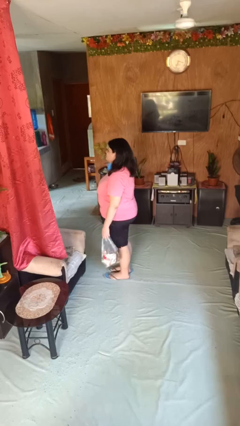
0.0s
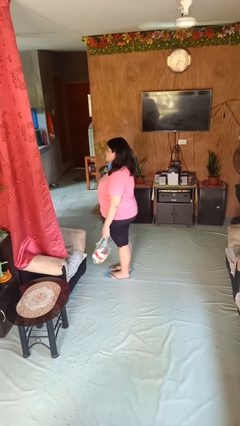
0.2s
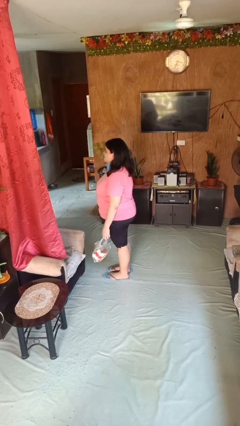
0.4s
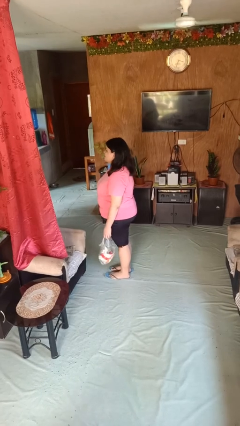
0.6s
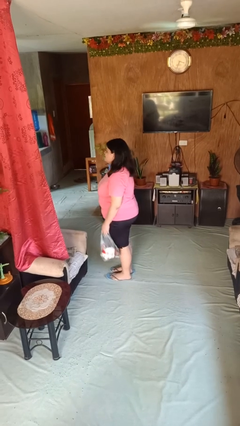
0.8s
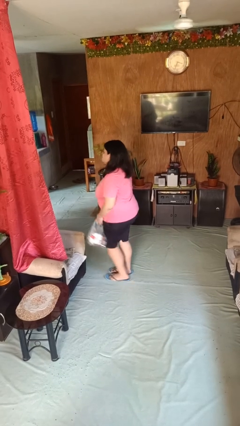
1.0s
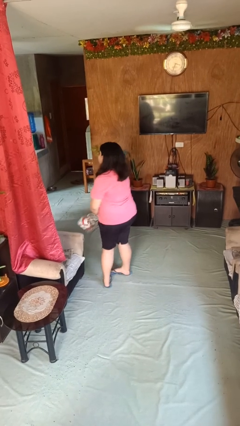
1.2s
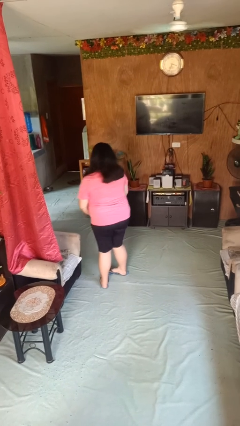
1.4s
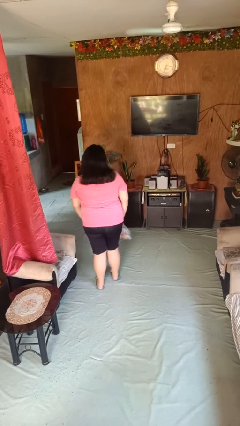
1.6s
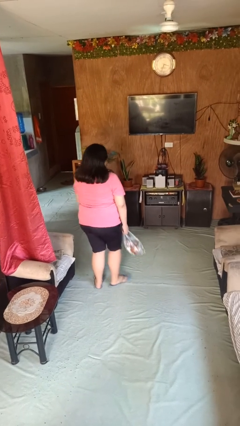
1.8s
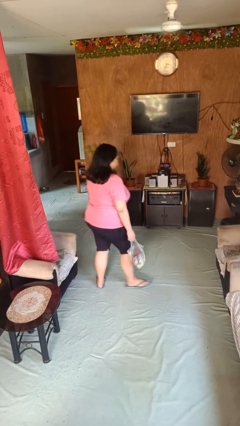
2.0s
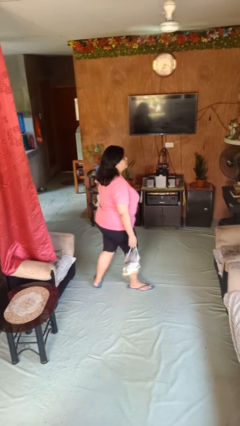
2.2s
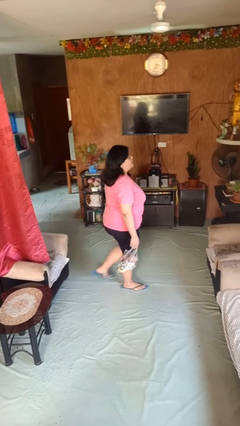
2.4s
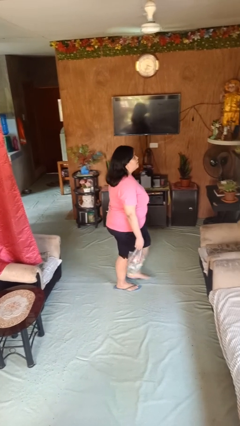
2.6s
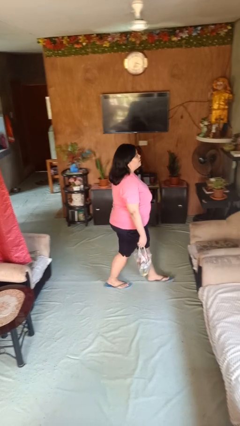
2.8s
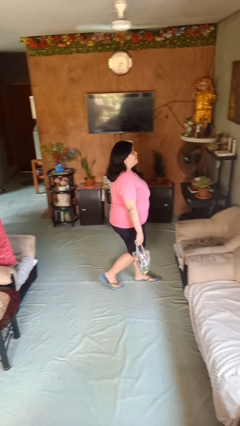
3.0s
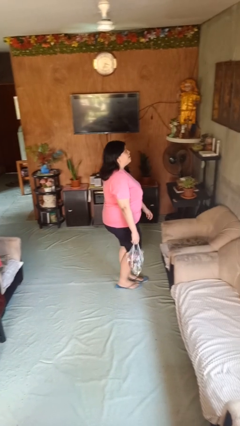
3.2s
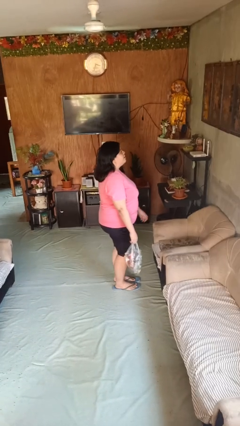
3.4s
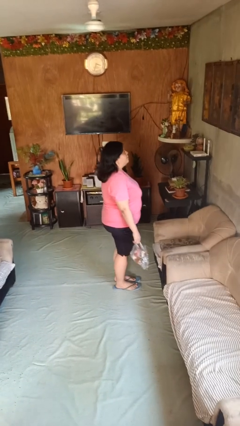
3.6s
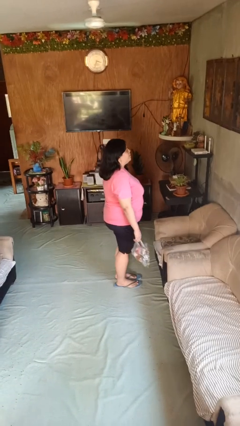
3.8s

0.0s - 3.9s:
person carries groceries

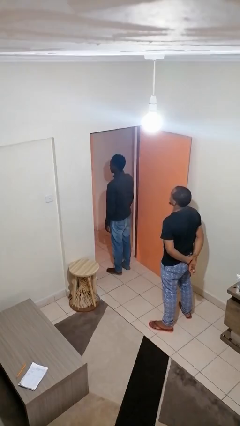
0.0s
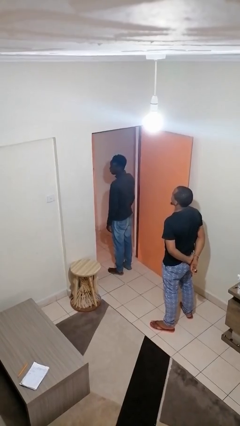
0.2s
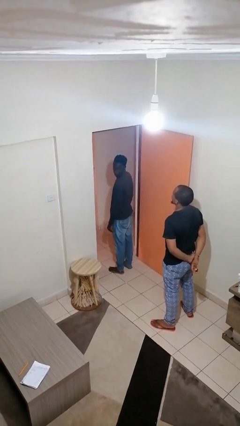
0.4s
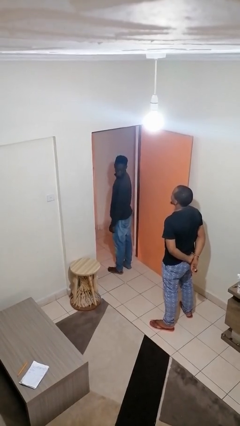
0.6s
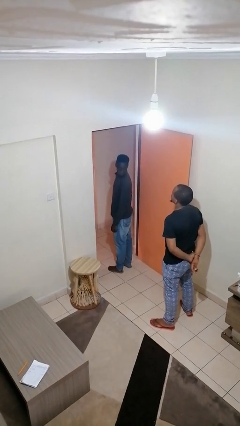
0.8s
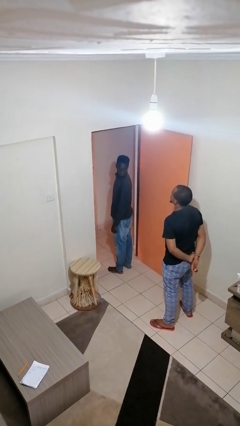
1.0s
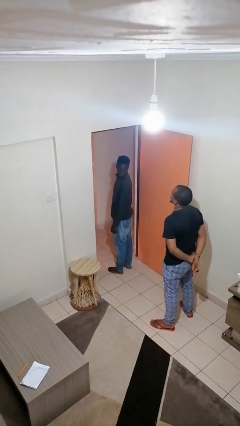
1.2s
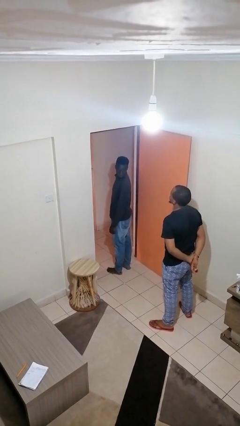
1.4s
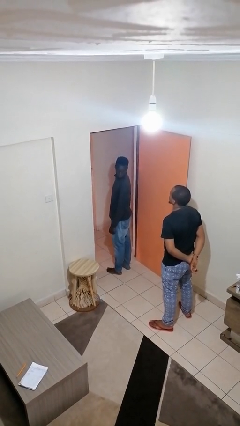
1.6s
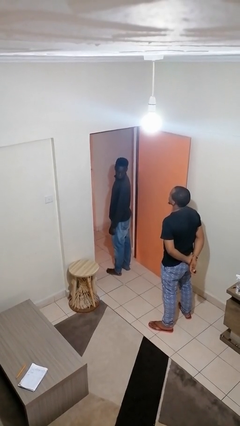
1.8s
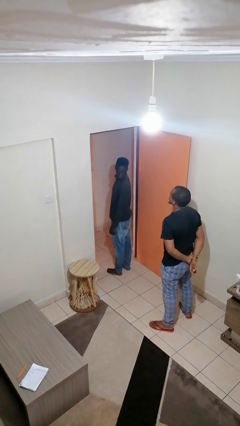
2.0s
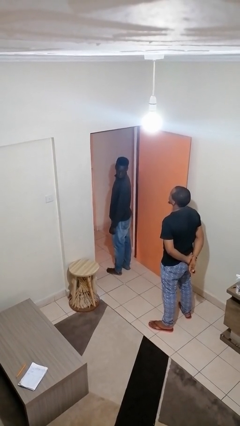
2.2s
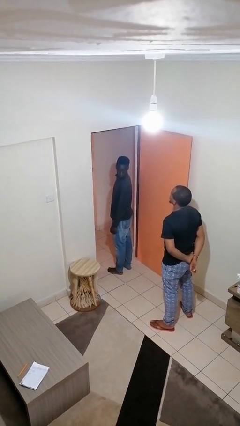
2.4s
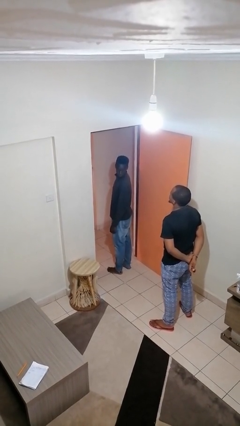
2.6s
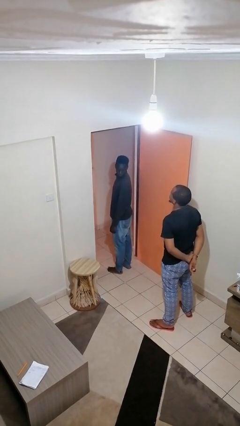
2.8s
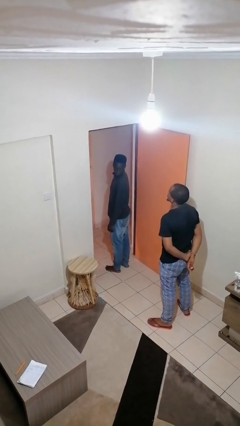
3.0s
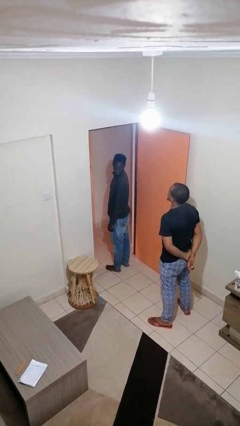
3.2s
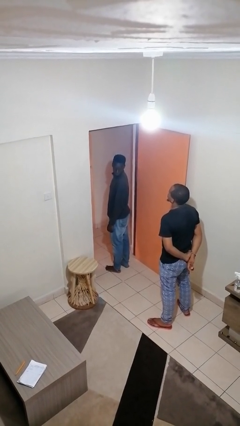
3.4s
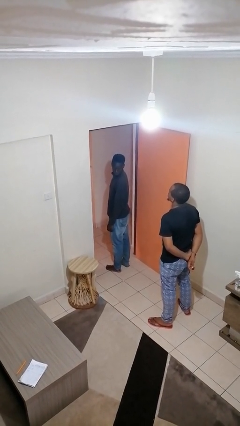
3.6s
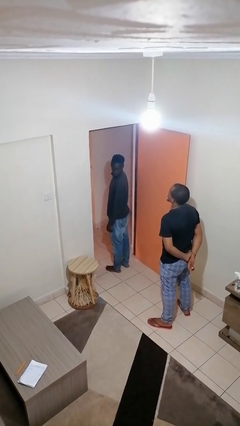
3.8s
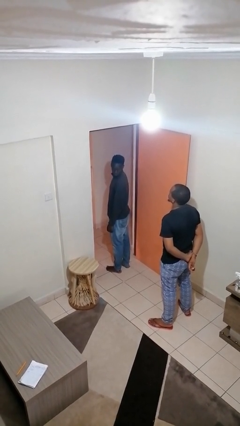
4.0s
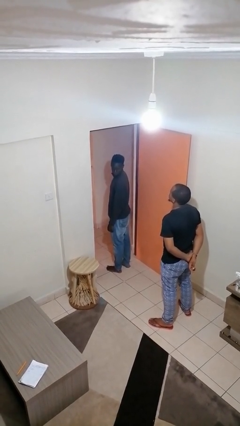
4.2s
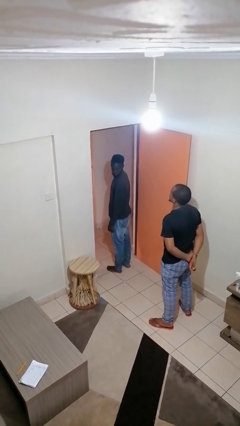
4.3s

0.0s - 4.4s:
person looks over shoulder

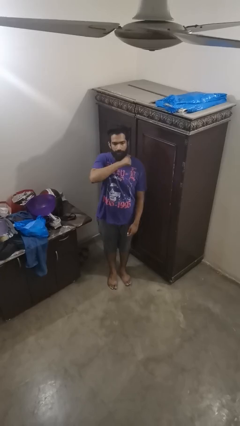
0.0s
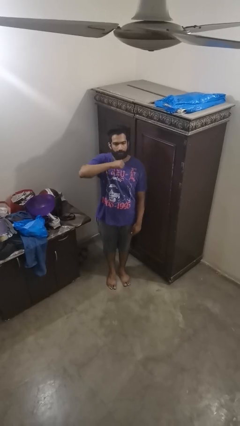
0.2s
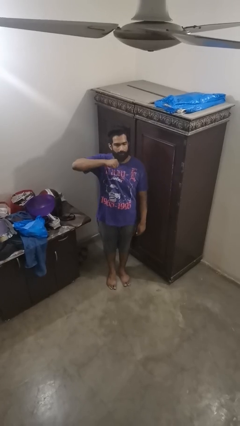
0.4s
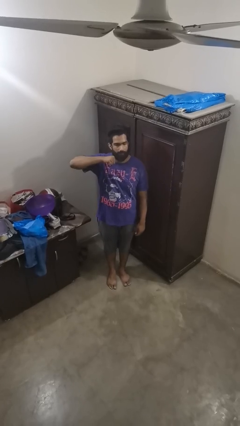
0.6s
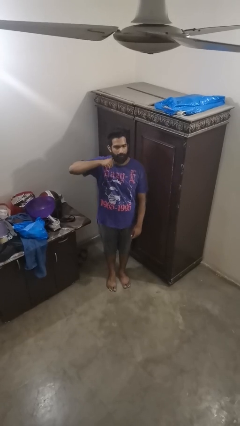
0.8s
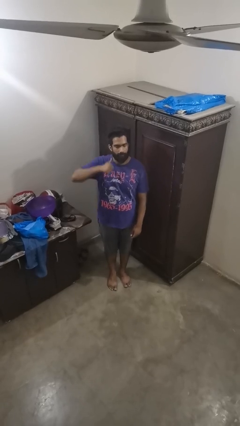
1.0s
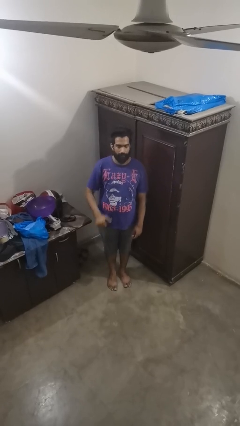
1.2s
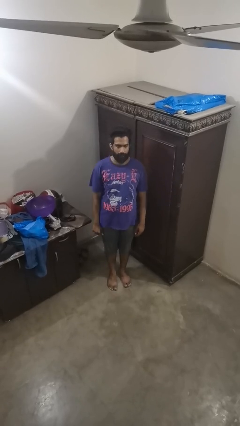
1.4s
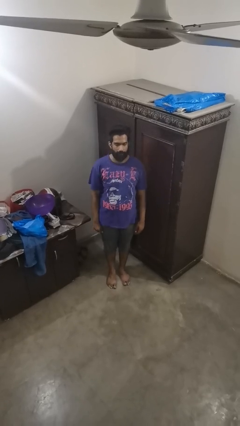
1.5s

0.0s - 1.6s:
person gestures cut

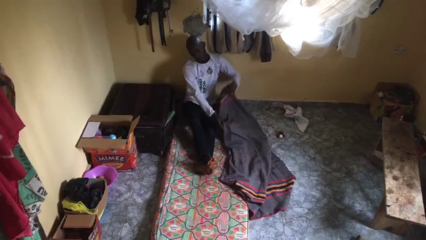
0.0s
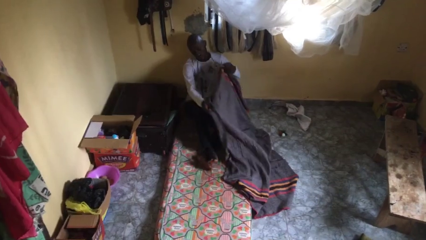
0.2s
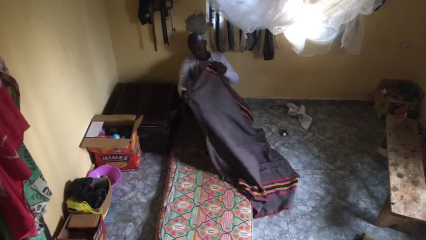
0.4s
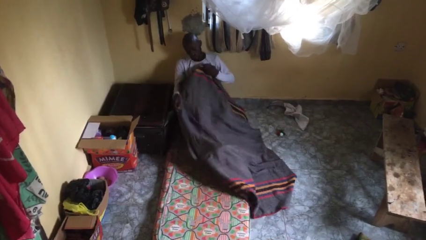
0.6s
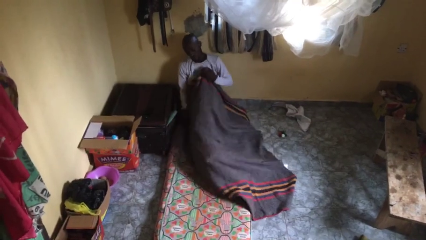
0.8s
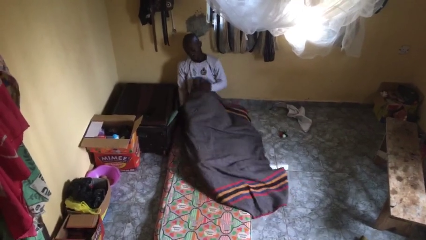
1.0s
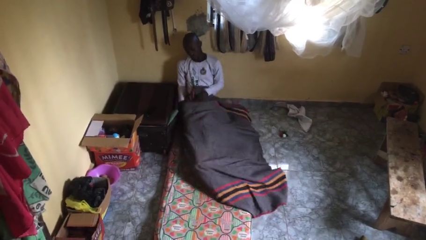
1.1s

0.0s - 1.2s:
person covers with blanket

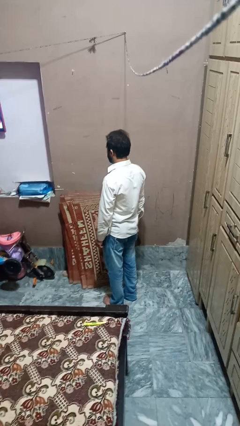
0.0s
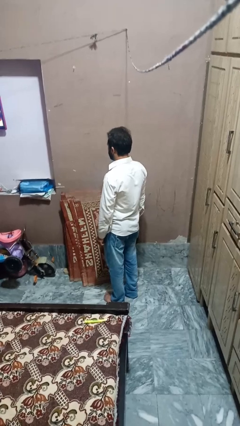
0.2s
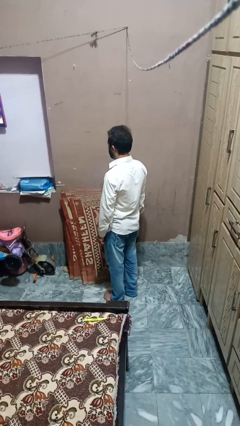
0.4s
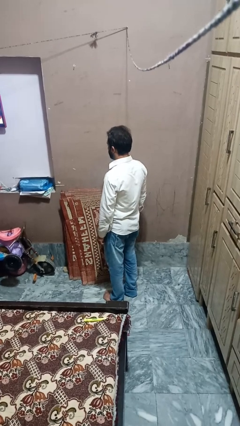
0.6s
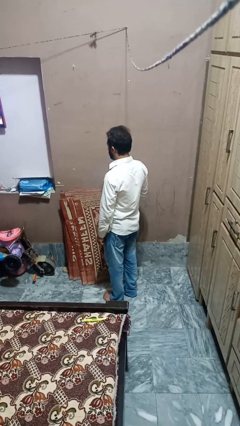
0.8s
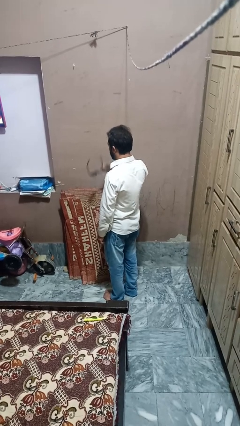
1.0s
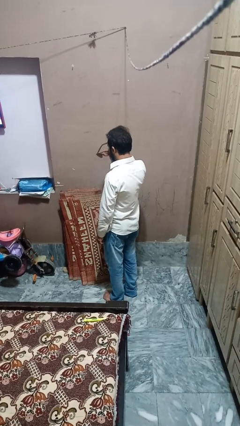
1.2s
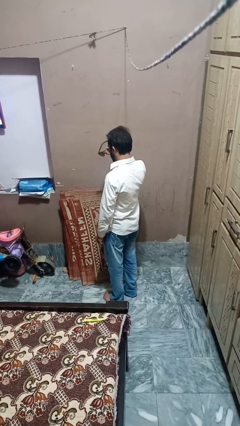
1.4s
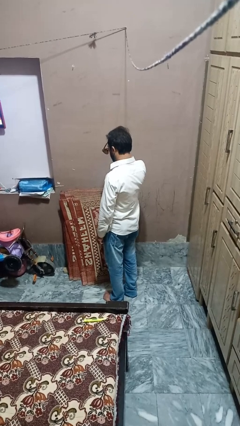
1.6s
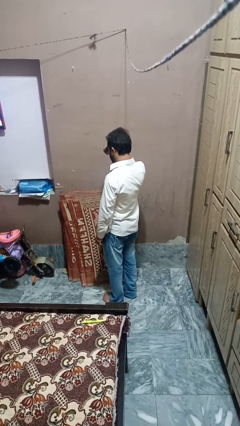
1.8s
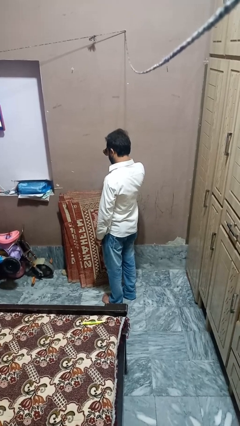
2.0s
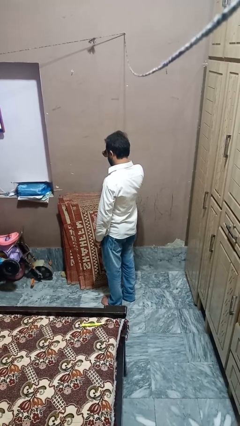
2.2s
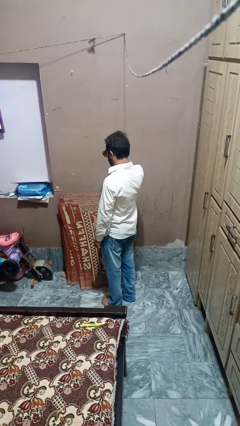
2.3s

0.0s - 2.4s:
person puts on sunglasses

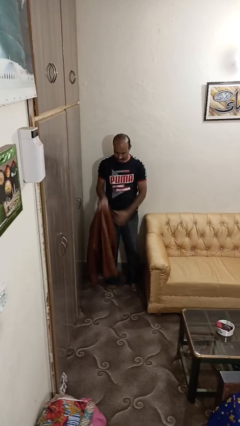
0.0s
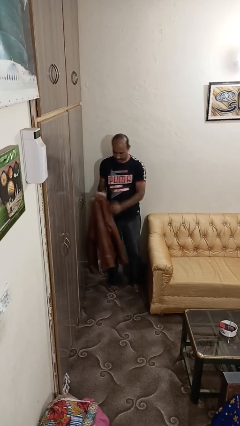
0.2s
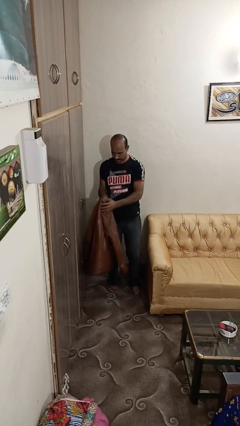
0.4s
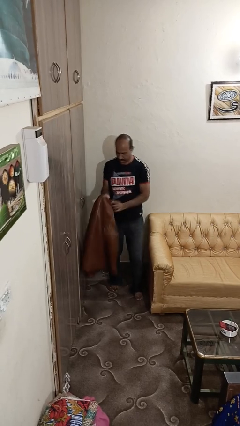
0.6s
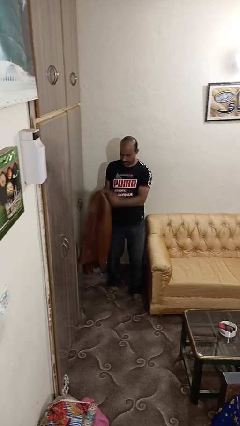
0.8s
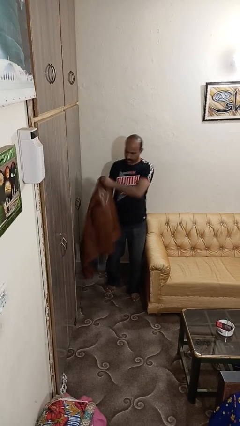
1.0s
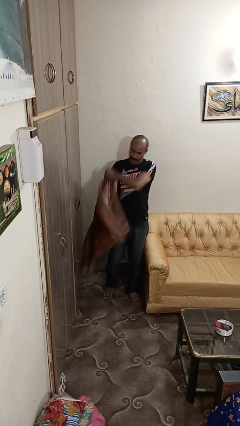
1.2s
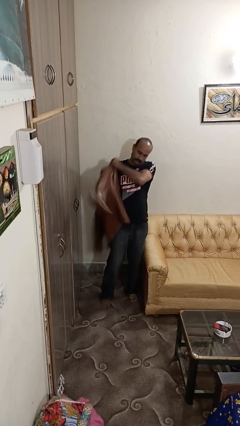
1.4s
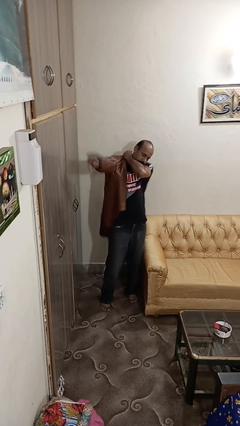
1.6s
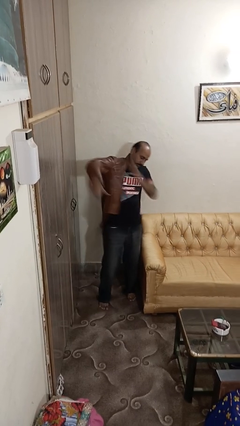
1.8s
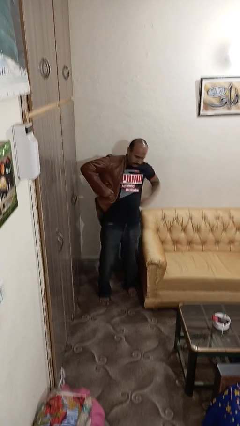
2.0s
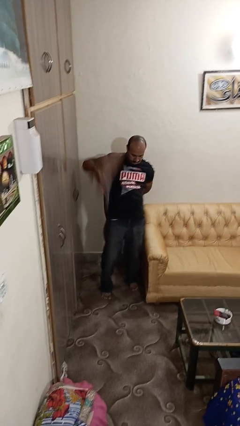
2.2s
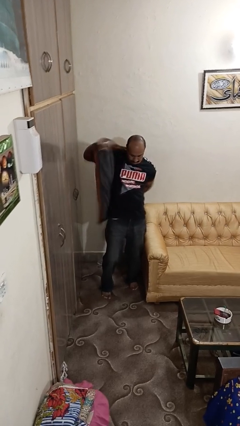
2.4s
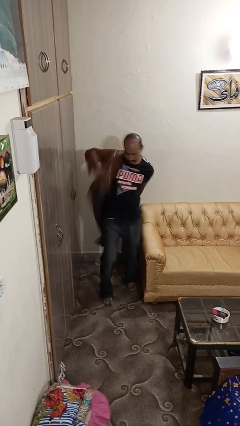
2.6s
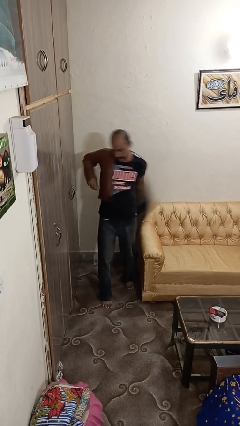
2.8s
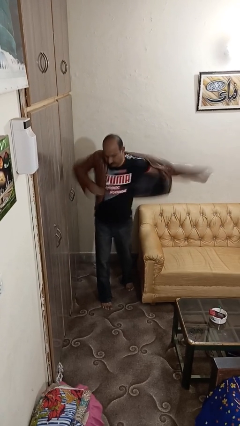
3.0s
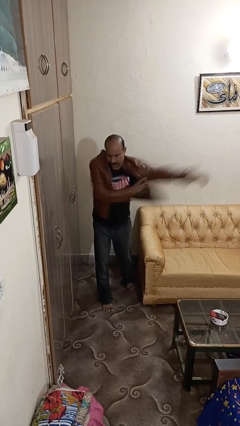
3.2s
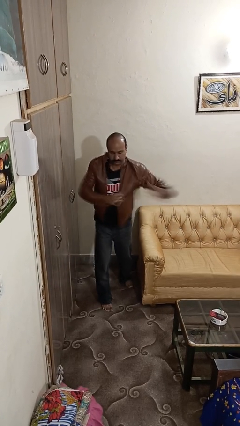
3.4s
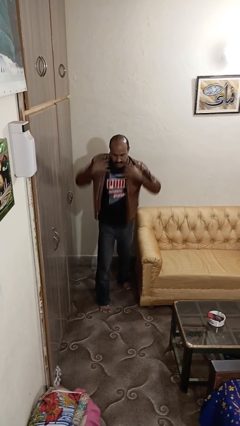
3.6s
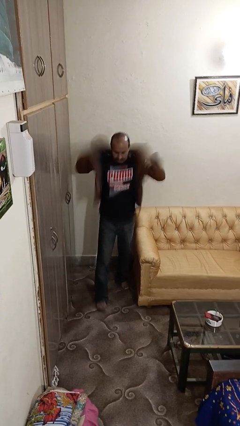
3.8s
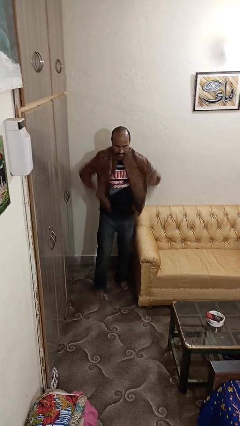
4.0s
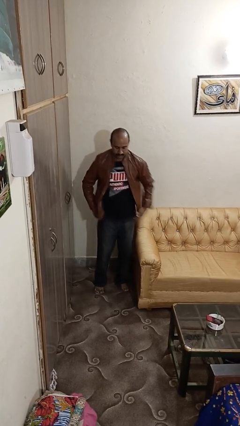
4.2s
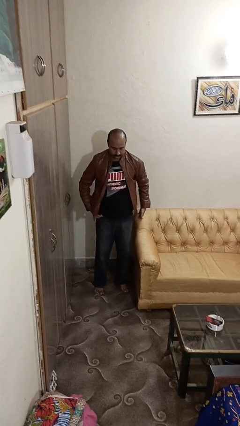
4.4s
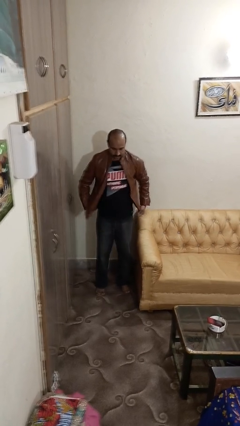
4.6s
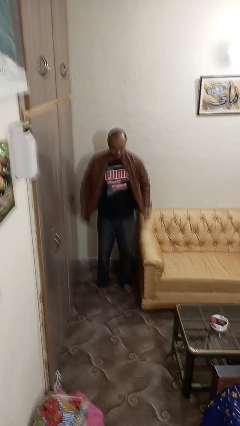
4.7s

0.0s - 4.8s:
person puts on jacket
